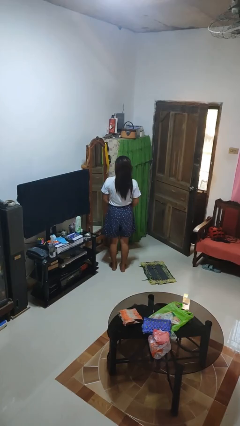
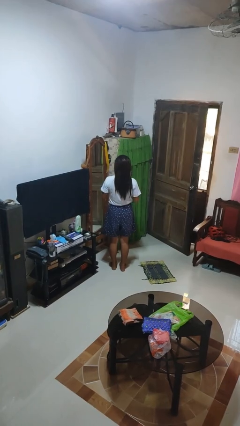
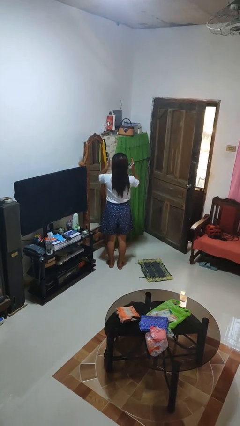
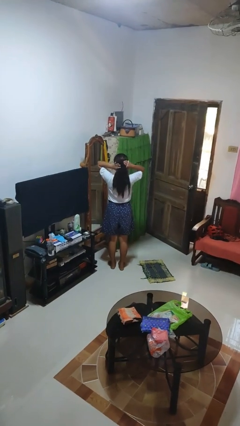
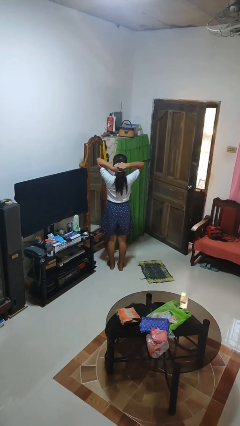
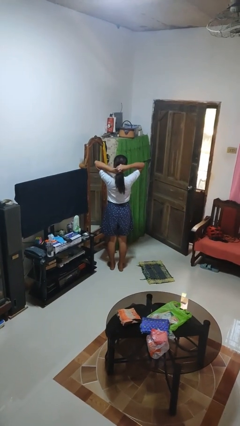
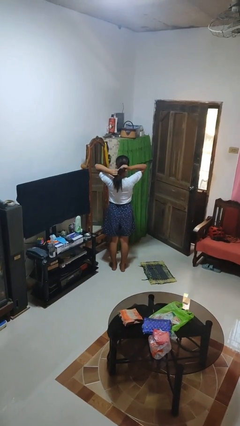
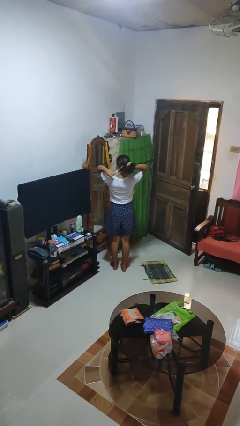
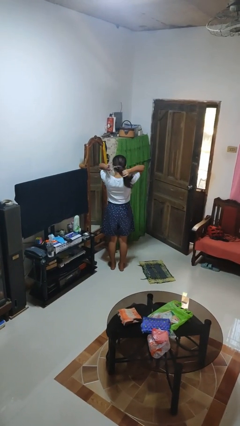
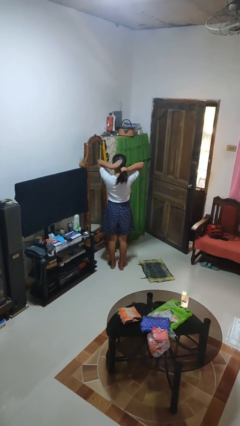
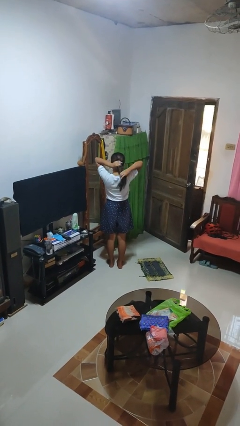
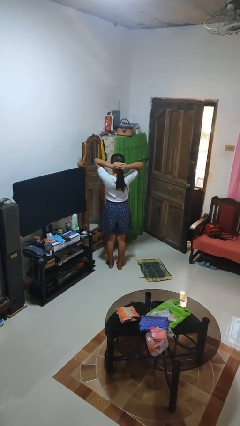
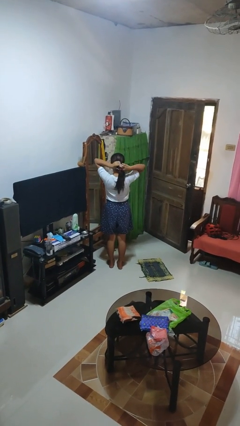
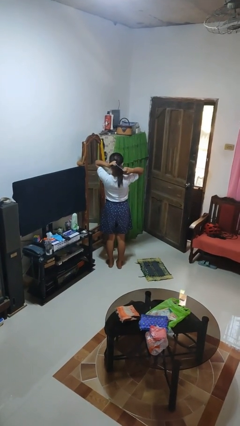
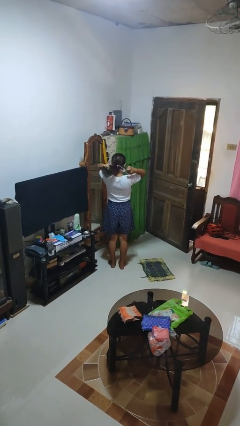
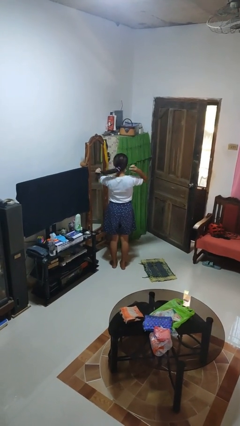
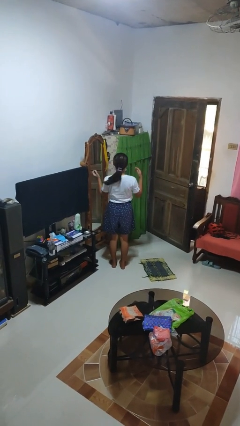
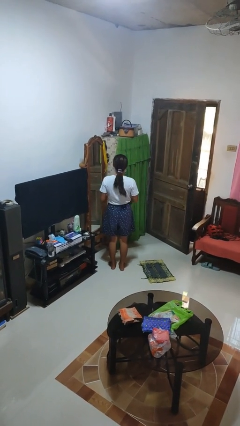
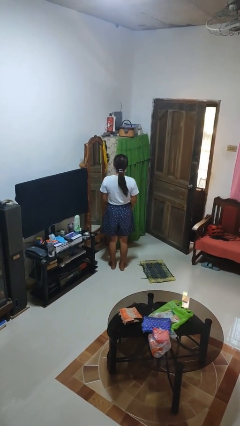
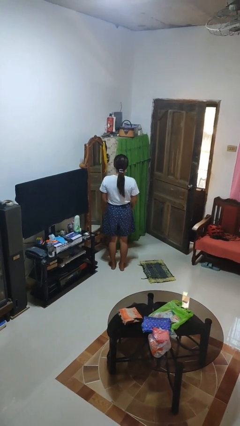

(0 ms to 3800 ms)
person puts hair in ponytail

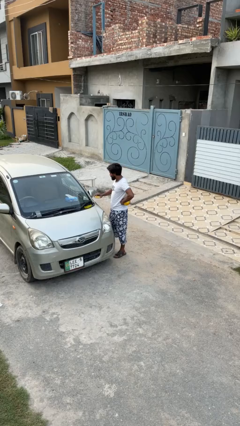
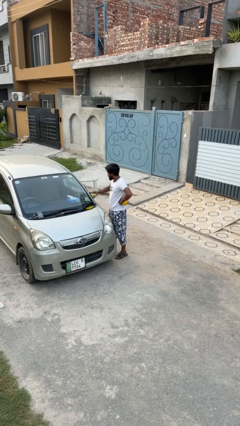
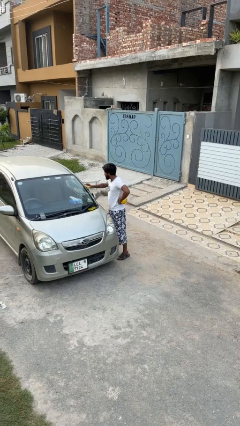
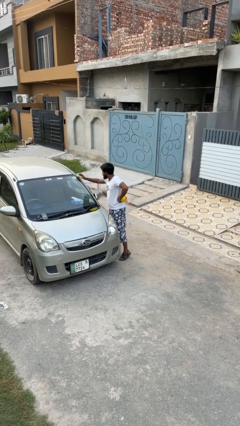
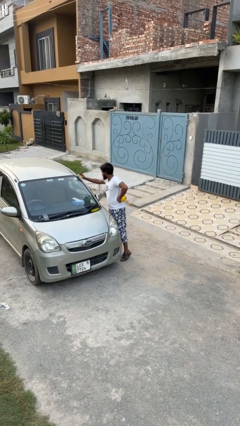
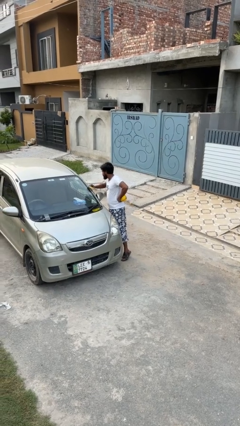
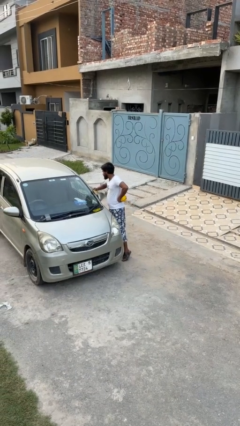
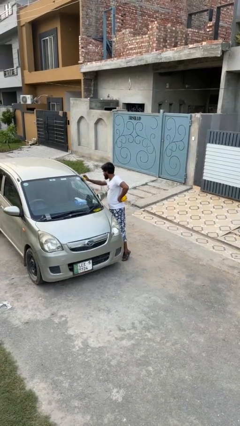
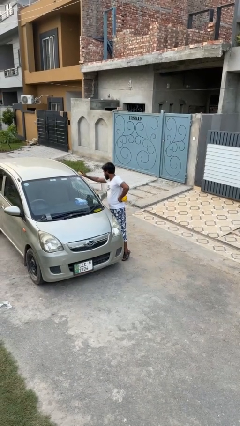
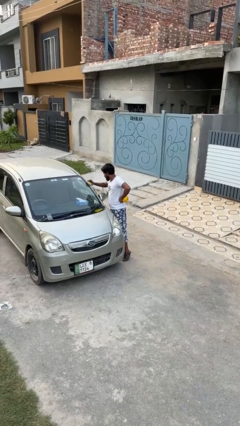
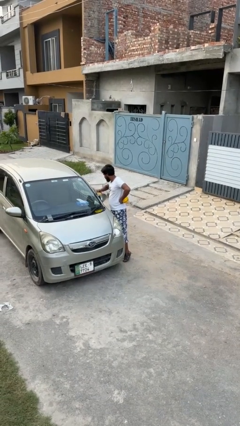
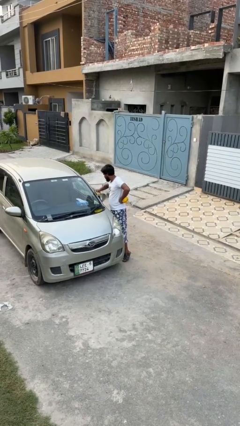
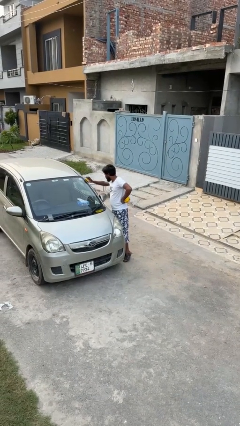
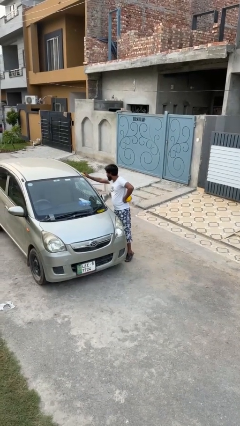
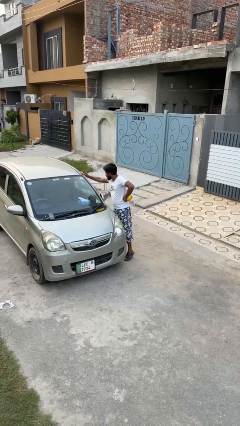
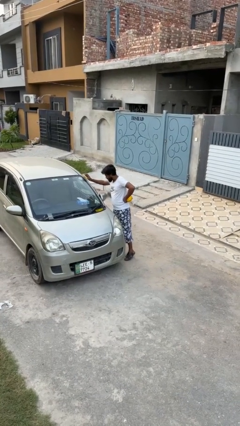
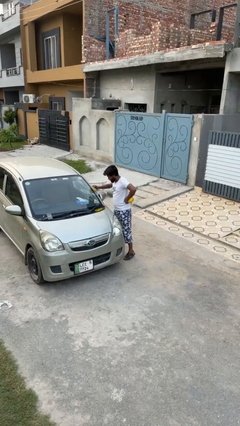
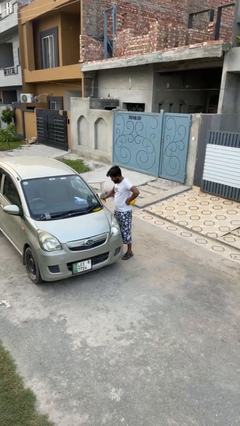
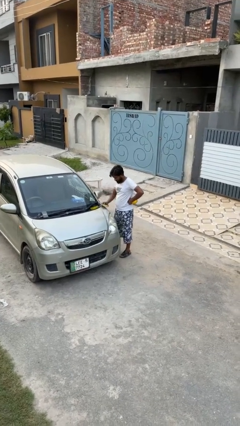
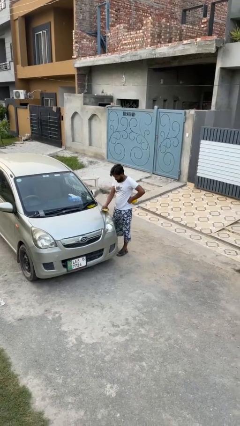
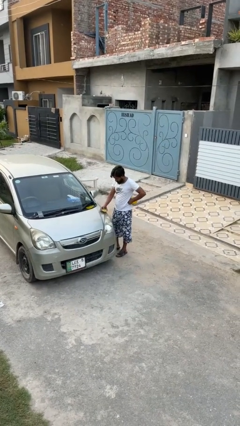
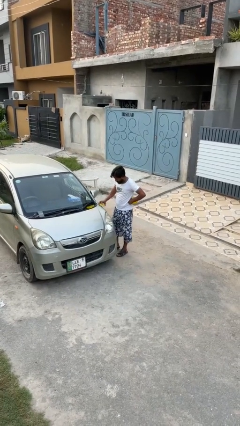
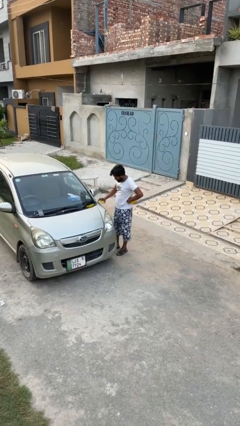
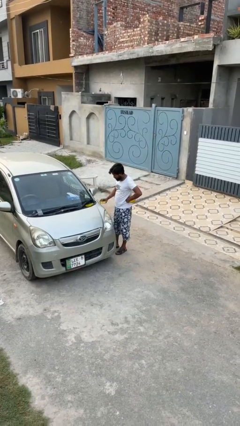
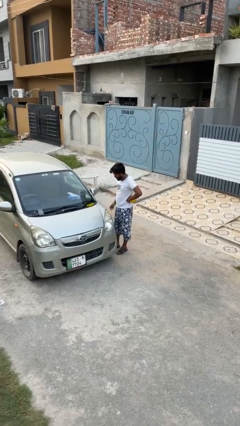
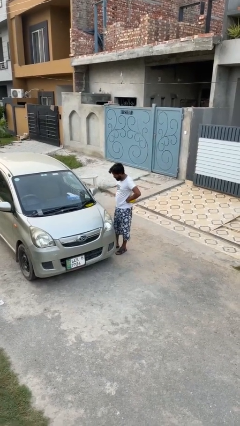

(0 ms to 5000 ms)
person polishes car with rag

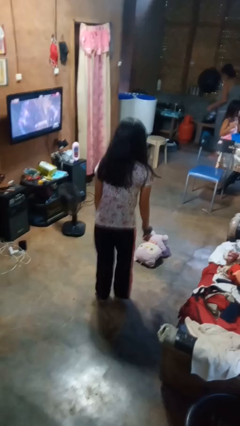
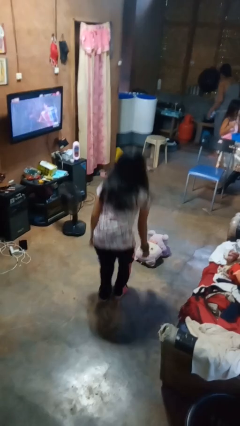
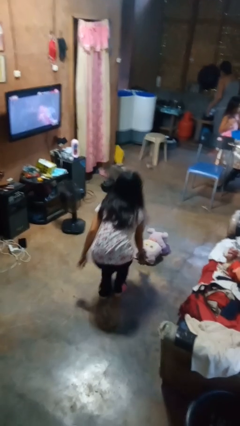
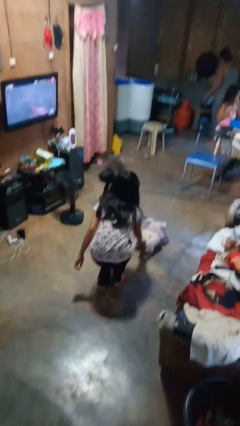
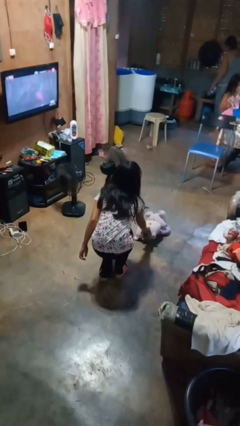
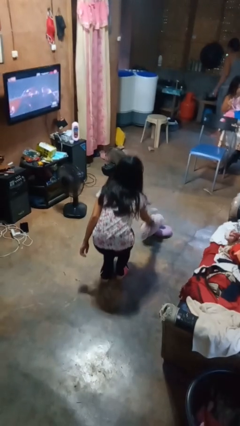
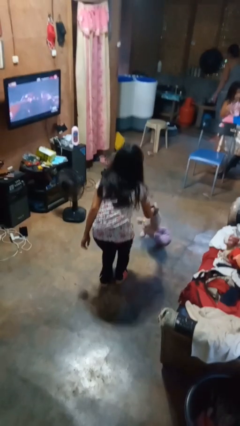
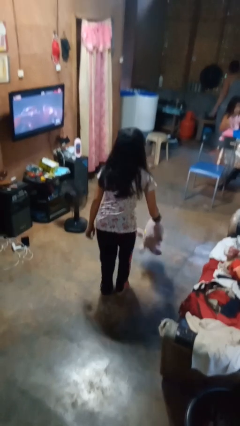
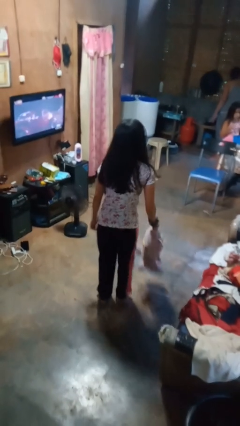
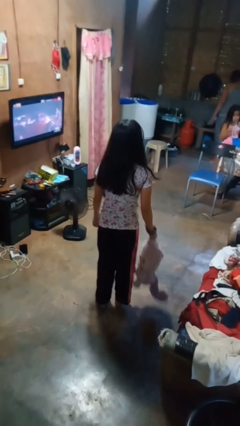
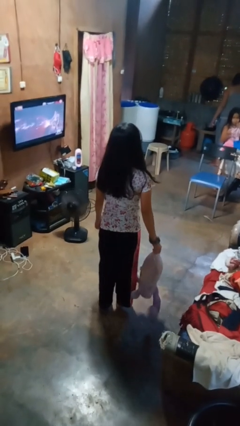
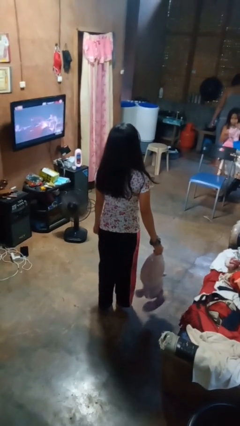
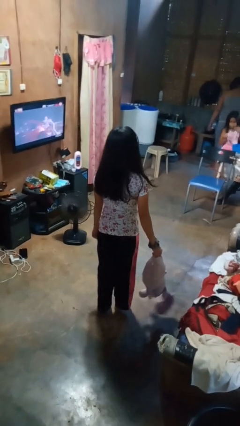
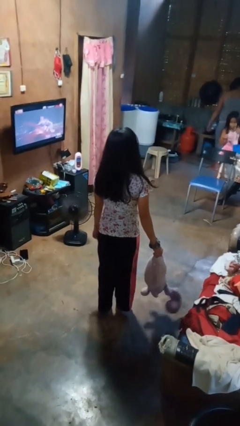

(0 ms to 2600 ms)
person picks up object from floor

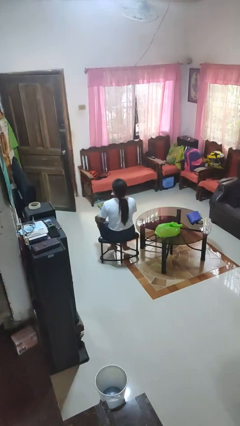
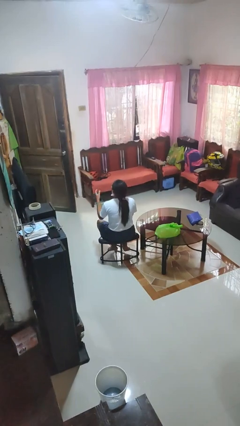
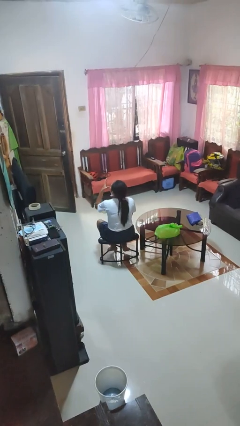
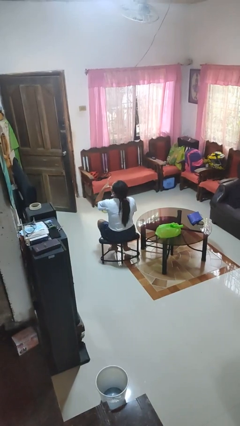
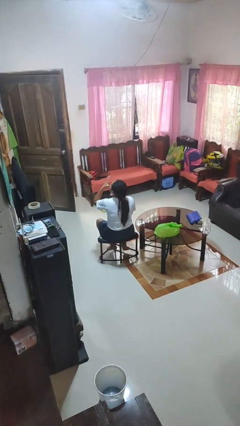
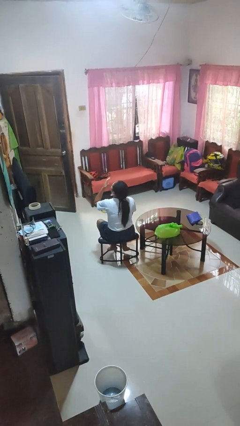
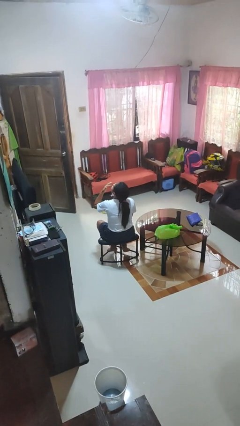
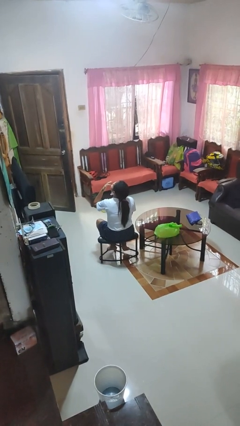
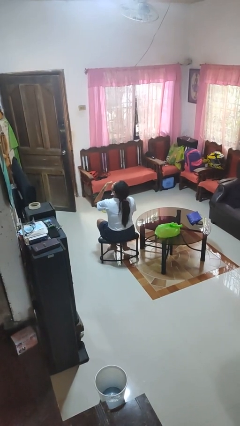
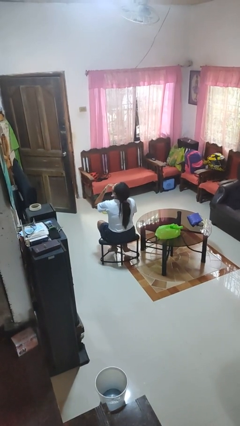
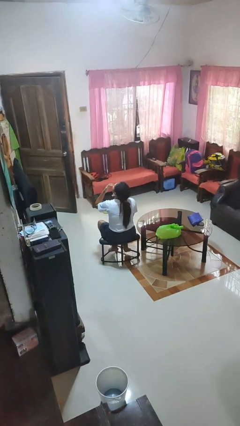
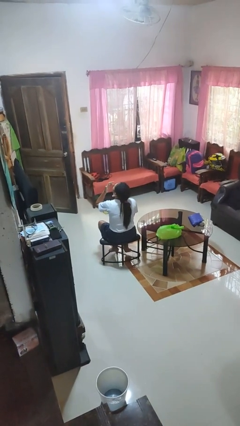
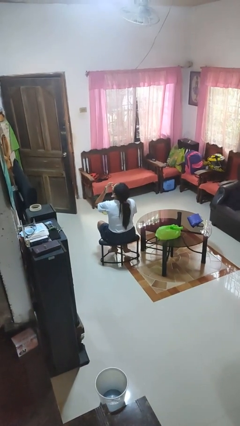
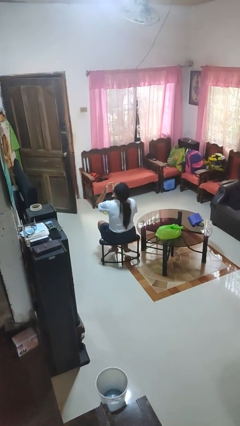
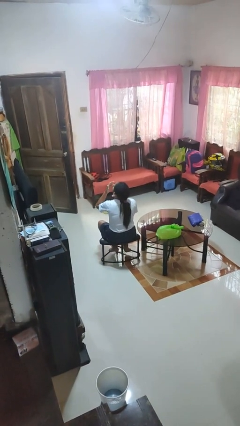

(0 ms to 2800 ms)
person licks fingers

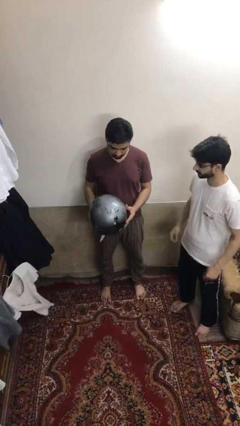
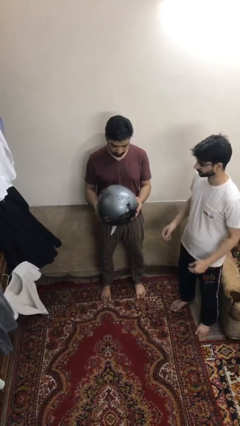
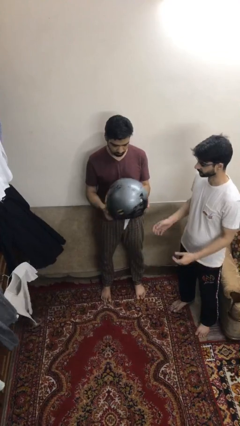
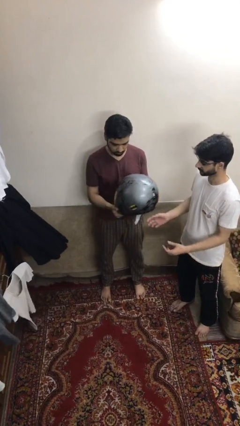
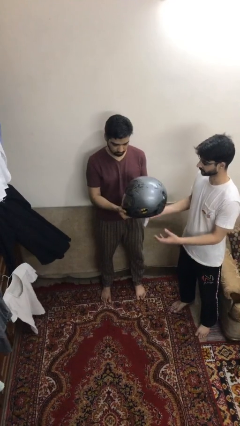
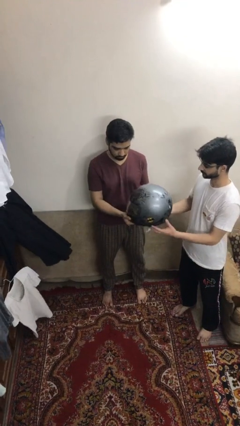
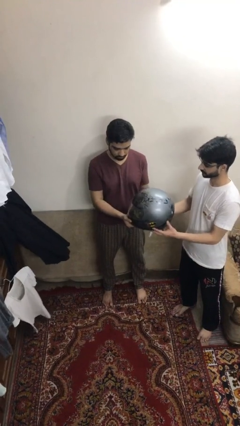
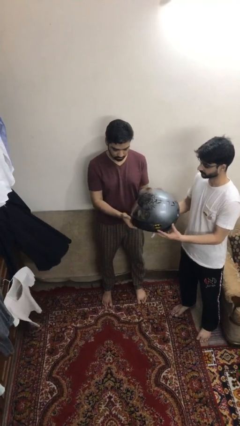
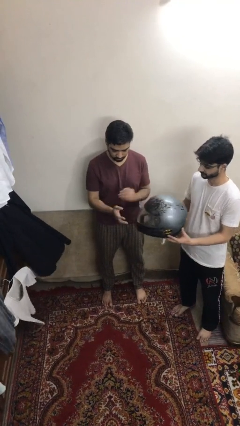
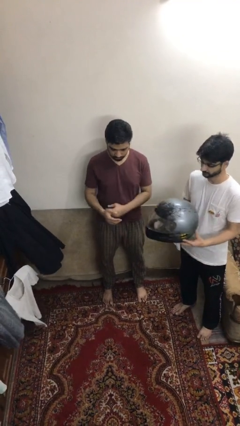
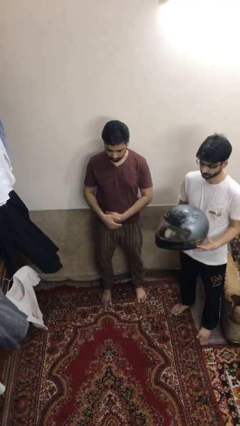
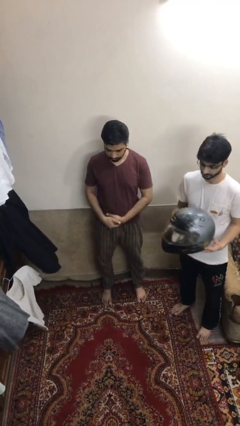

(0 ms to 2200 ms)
person transfers object to person

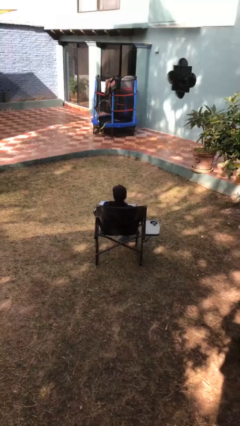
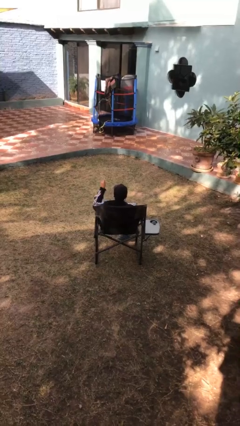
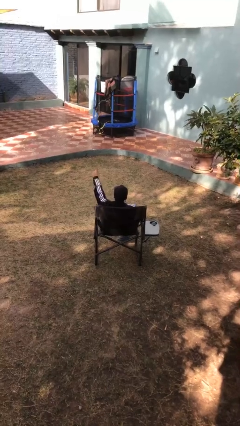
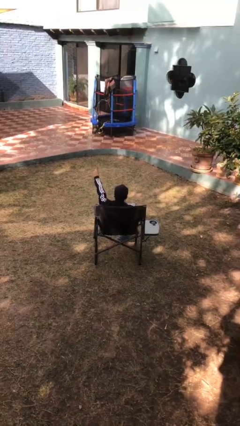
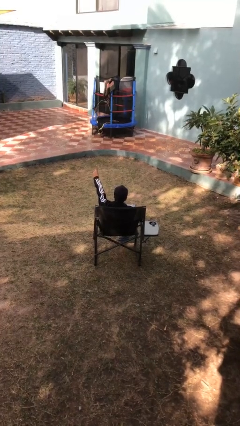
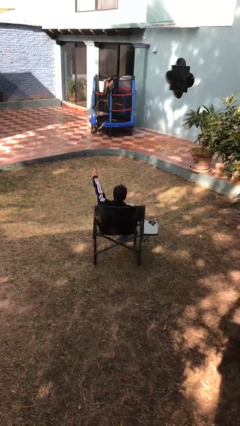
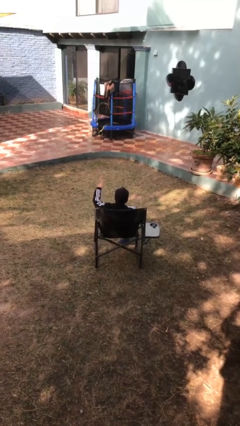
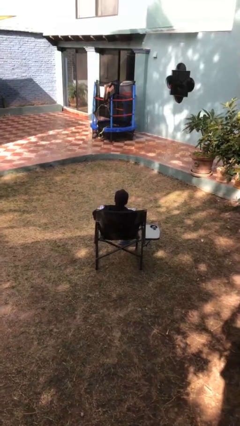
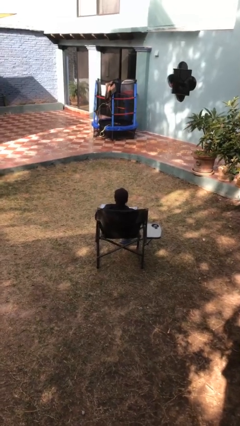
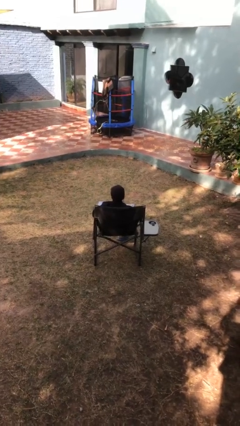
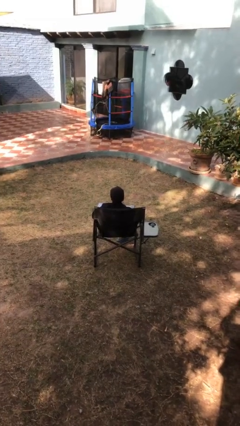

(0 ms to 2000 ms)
person gestures number one
